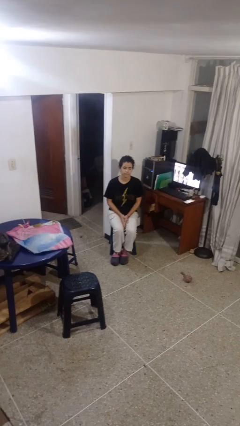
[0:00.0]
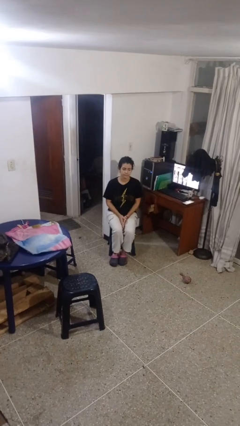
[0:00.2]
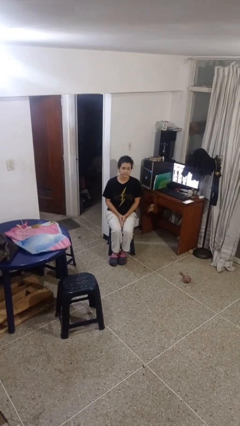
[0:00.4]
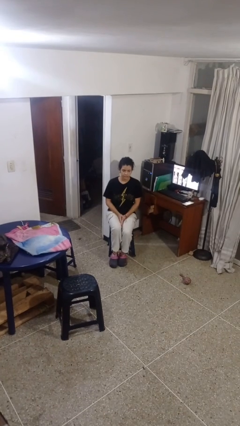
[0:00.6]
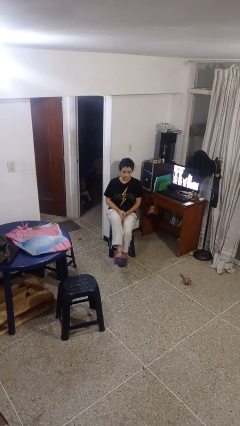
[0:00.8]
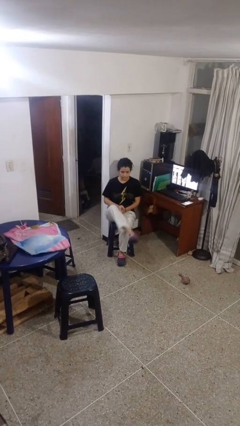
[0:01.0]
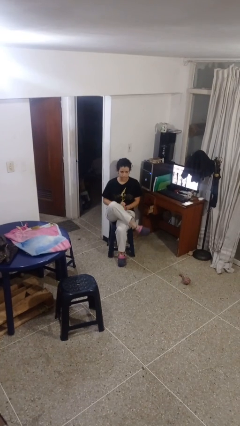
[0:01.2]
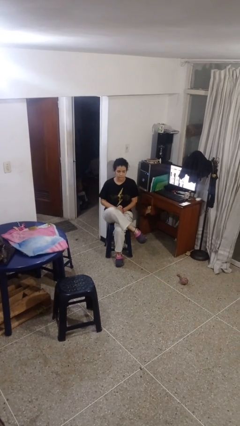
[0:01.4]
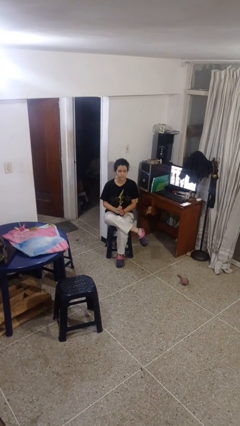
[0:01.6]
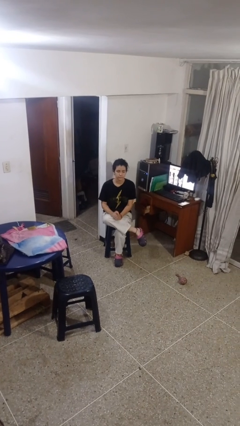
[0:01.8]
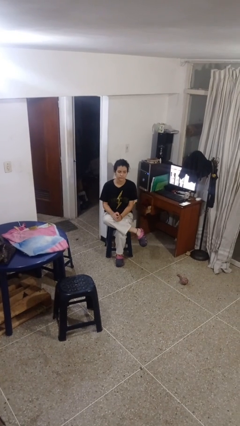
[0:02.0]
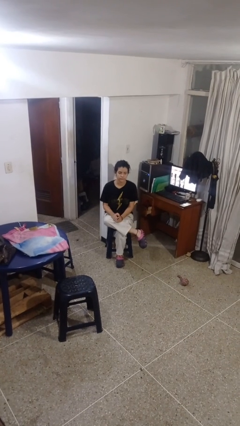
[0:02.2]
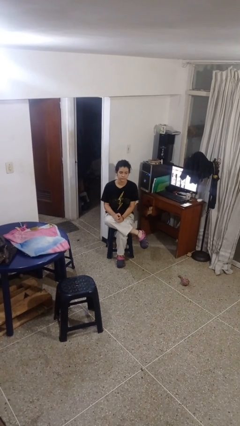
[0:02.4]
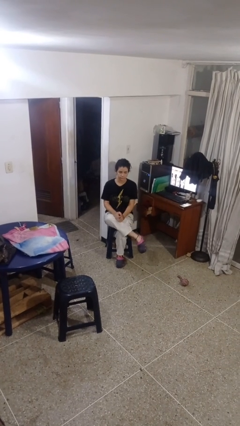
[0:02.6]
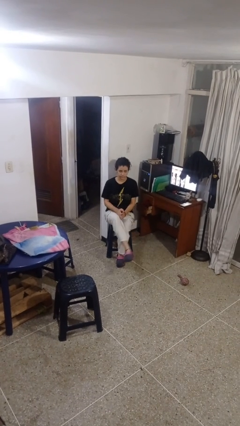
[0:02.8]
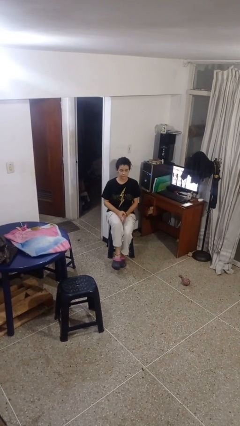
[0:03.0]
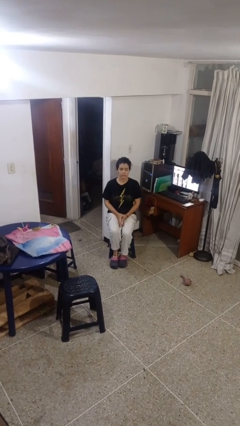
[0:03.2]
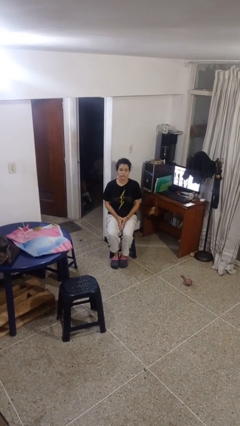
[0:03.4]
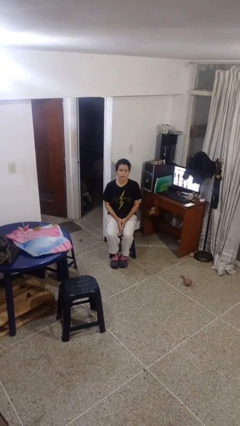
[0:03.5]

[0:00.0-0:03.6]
person crosses legs

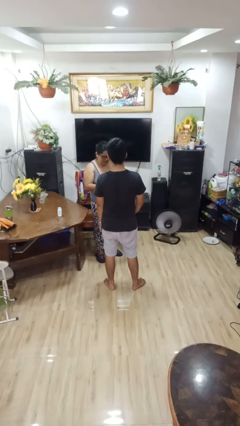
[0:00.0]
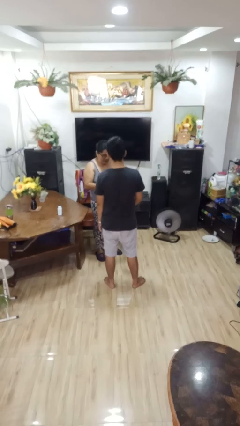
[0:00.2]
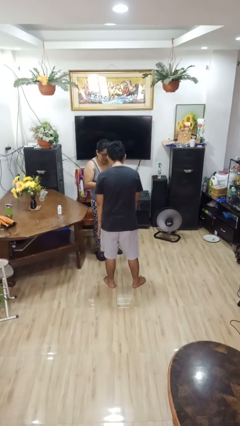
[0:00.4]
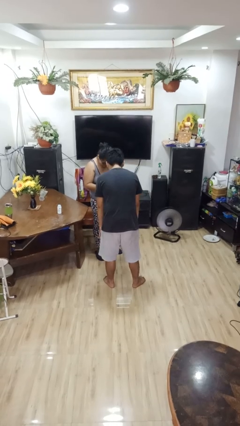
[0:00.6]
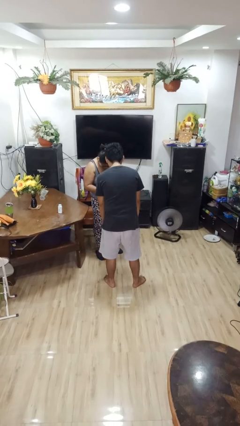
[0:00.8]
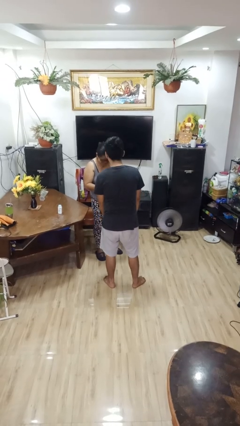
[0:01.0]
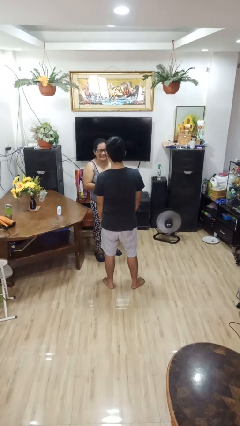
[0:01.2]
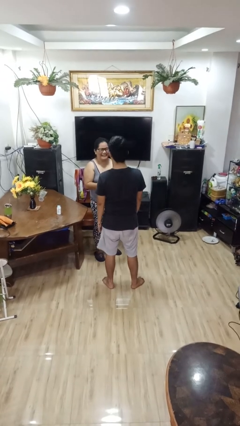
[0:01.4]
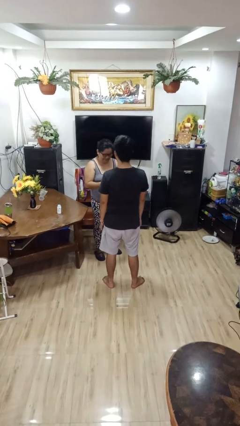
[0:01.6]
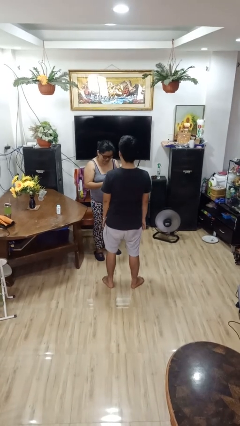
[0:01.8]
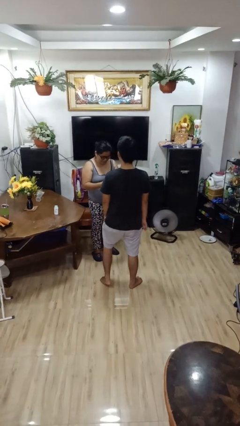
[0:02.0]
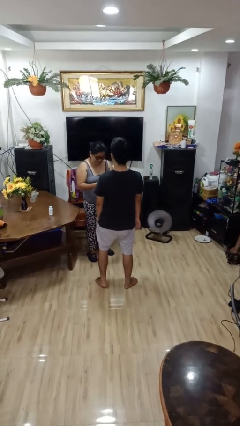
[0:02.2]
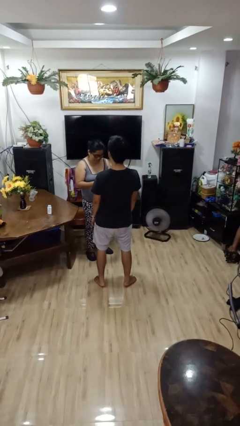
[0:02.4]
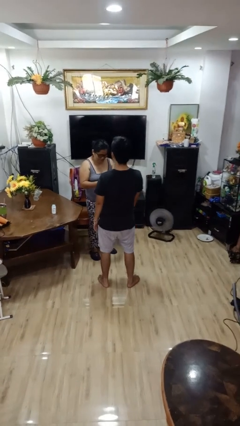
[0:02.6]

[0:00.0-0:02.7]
person laughs with person

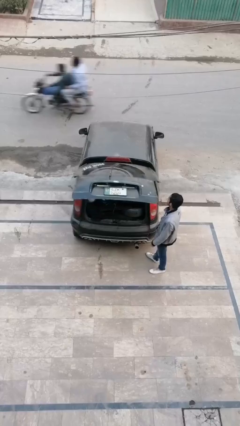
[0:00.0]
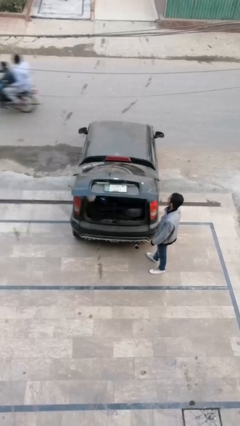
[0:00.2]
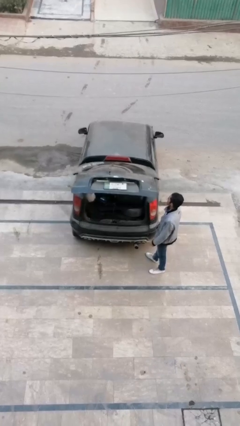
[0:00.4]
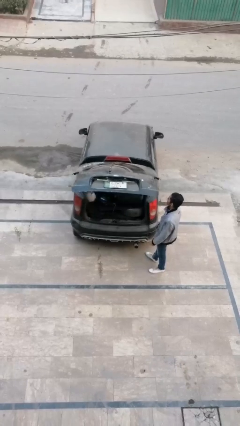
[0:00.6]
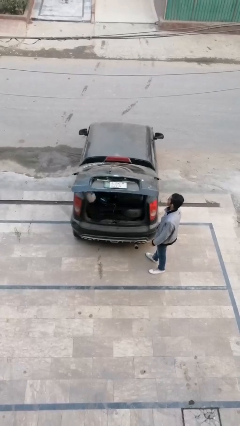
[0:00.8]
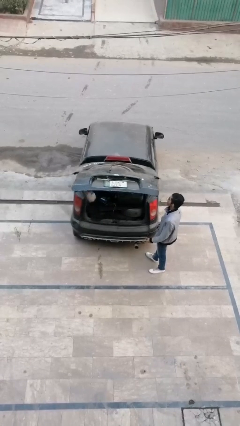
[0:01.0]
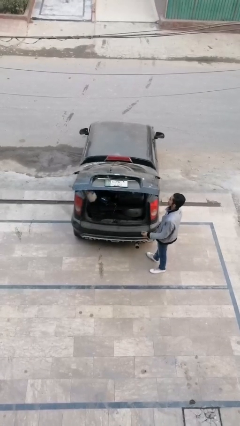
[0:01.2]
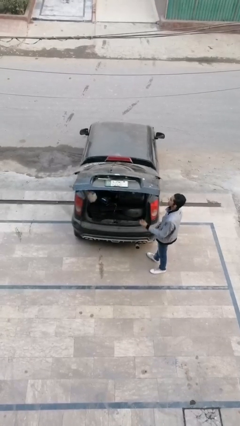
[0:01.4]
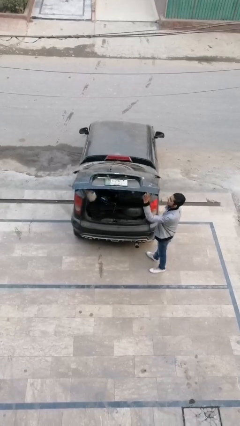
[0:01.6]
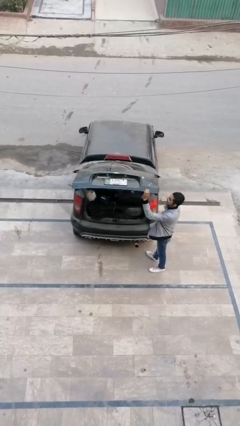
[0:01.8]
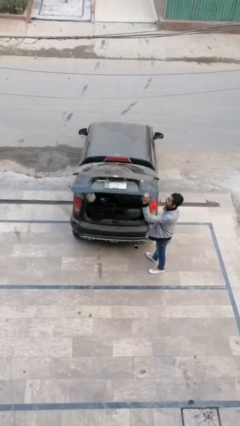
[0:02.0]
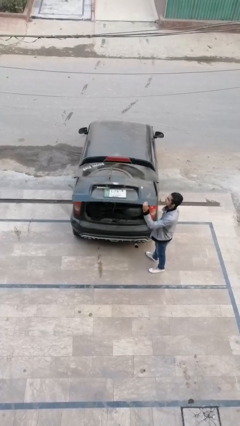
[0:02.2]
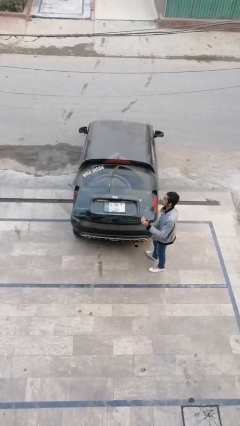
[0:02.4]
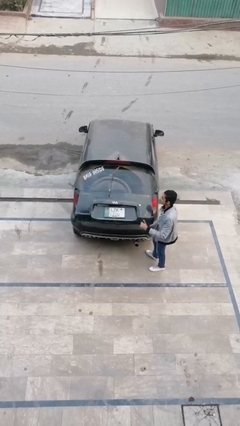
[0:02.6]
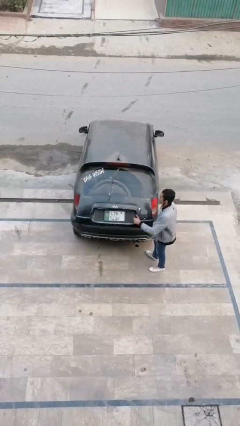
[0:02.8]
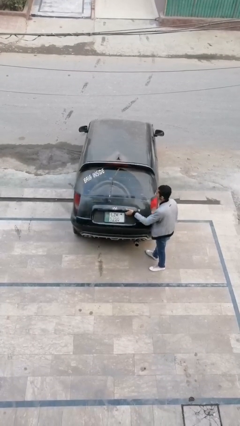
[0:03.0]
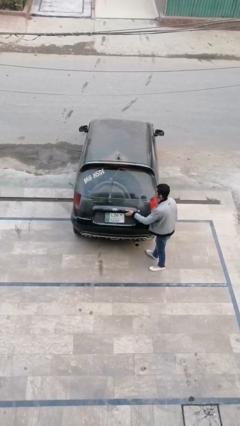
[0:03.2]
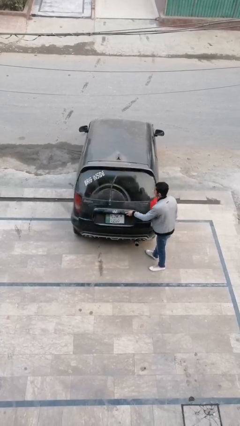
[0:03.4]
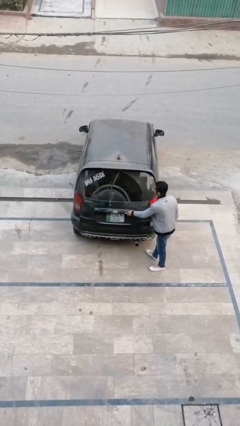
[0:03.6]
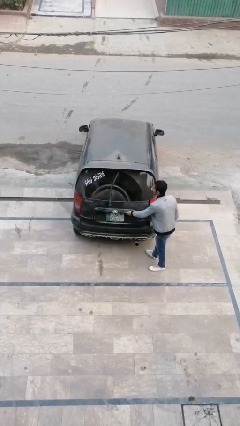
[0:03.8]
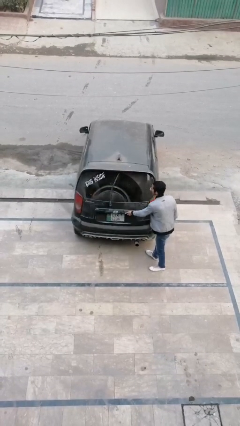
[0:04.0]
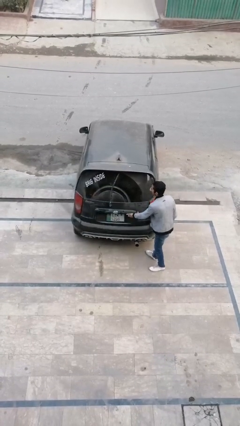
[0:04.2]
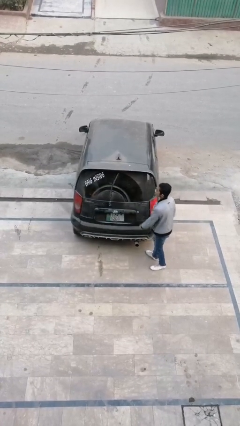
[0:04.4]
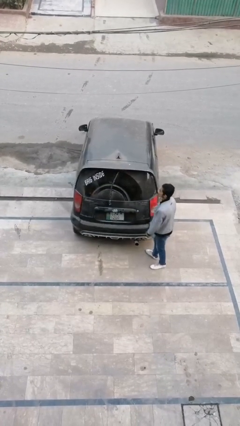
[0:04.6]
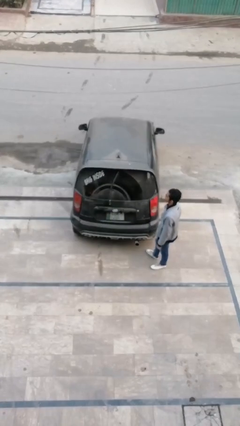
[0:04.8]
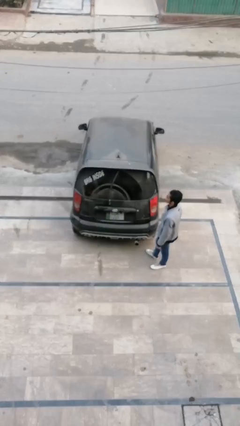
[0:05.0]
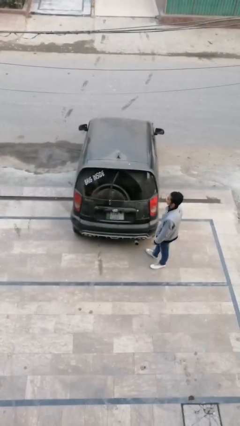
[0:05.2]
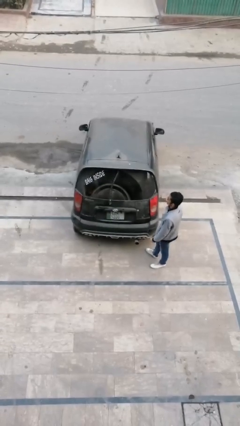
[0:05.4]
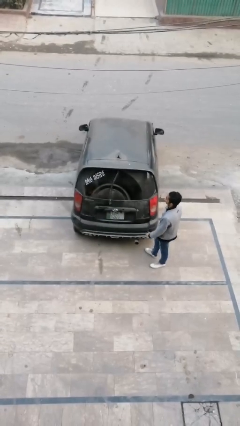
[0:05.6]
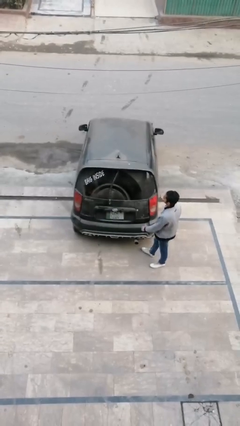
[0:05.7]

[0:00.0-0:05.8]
person opens car trunk

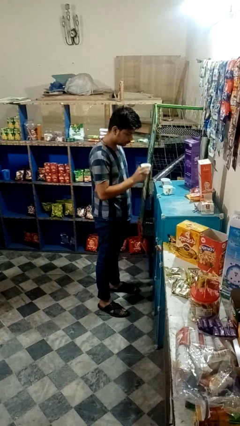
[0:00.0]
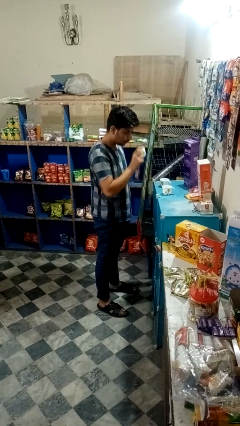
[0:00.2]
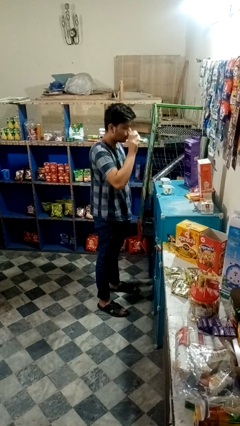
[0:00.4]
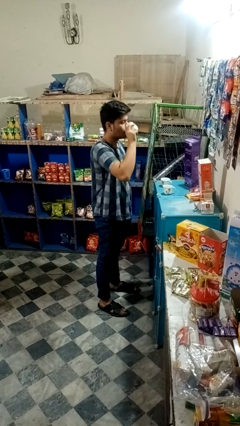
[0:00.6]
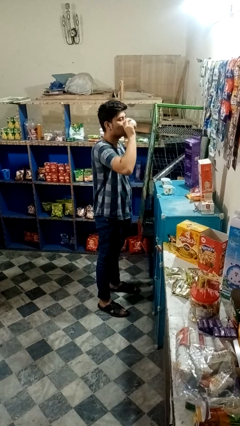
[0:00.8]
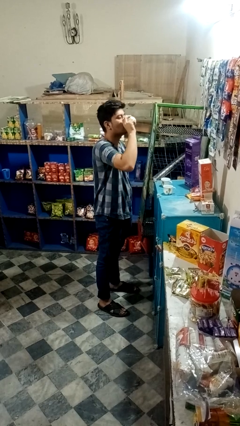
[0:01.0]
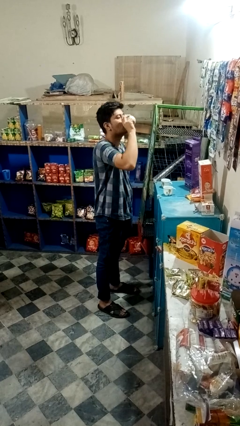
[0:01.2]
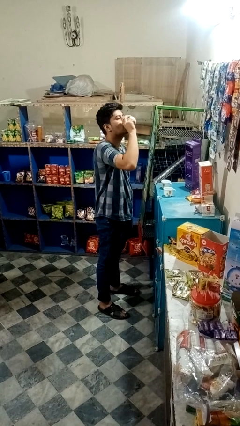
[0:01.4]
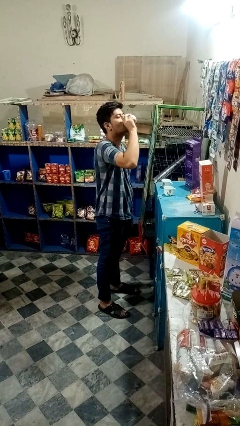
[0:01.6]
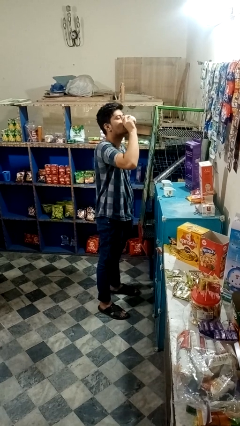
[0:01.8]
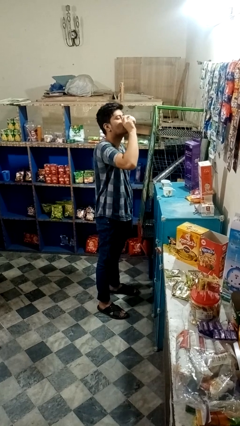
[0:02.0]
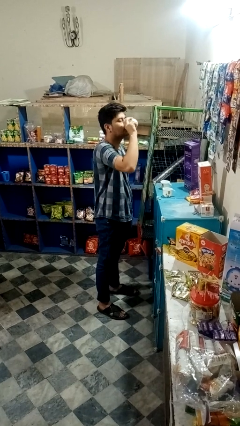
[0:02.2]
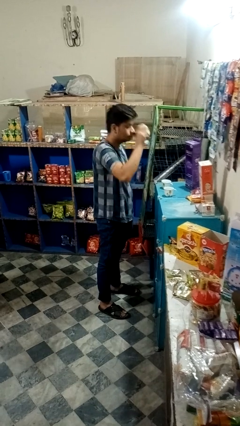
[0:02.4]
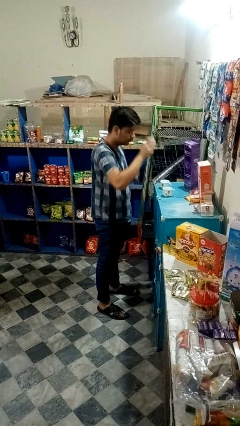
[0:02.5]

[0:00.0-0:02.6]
person drinks from shotglass

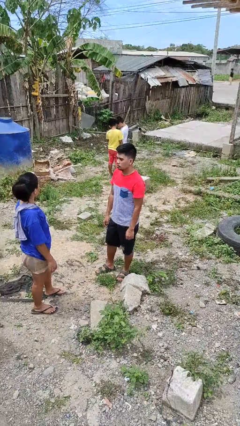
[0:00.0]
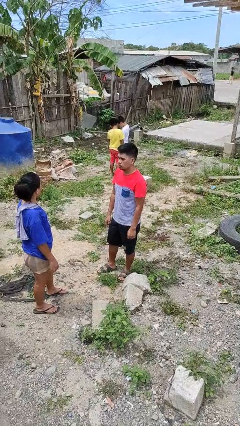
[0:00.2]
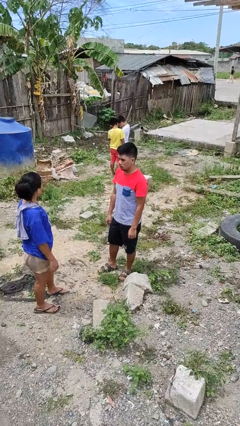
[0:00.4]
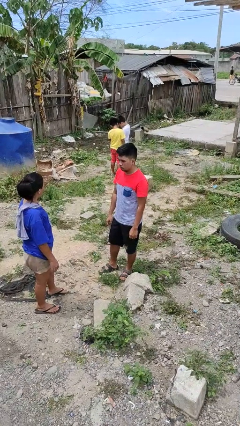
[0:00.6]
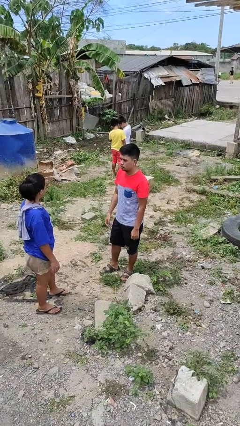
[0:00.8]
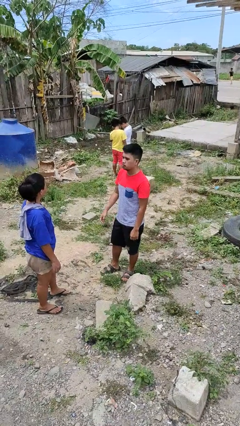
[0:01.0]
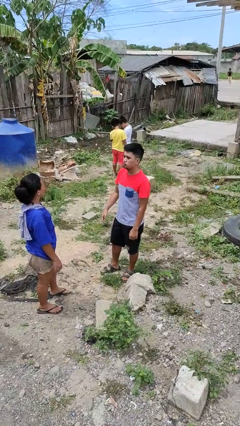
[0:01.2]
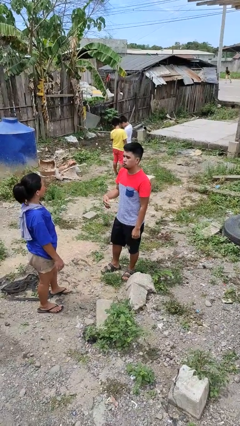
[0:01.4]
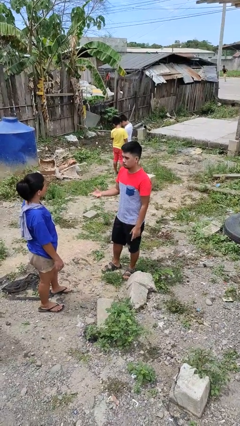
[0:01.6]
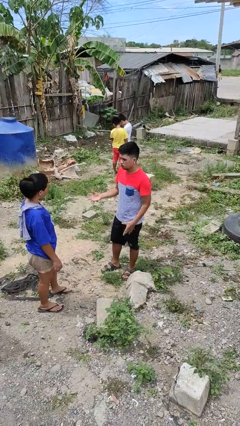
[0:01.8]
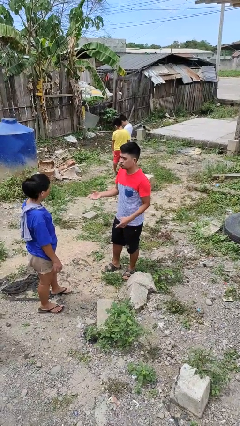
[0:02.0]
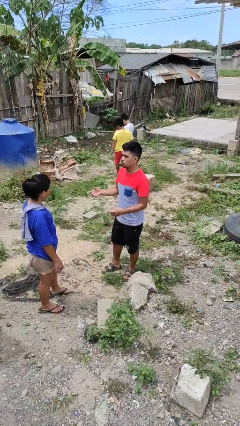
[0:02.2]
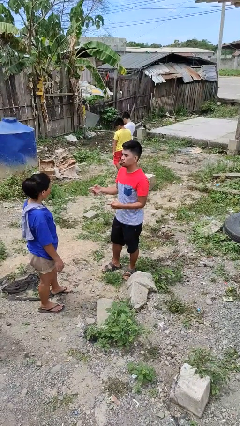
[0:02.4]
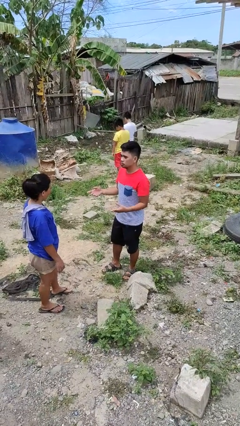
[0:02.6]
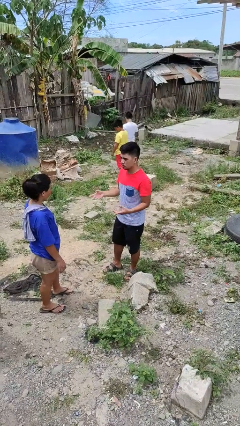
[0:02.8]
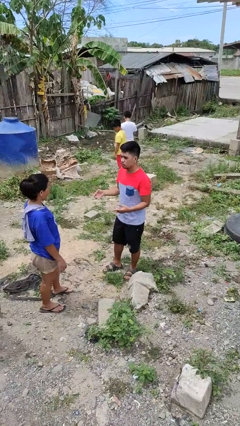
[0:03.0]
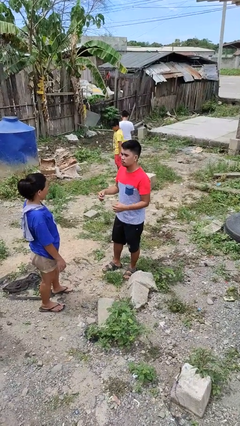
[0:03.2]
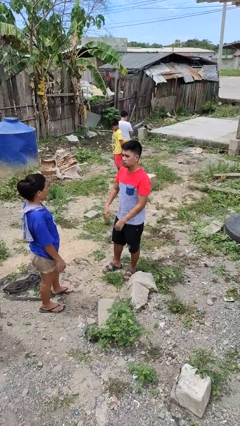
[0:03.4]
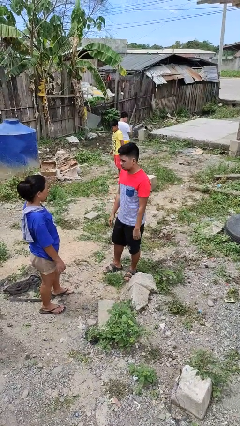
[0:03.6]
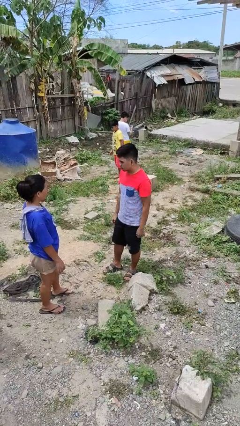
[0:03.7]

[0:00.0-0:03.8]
person talks to person
